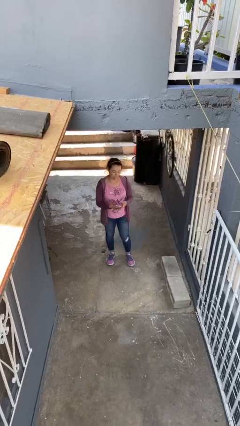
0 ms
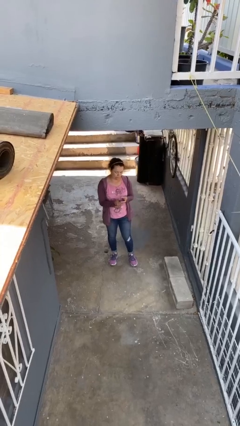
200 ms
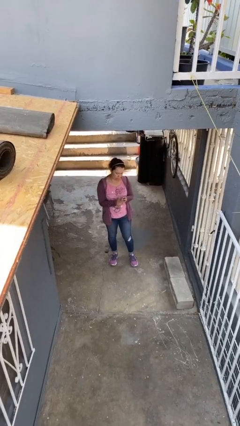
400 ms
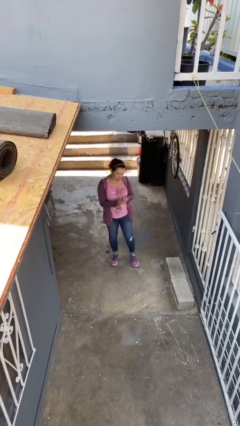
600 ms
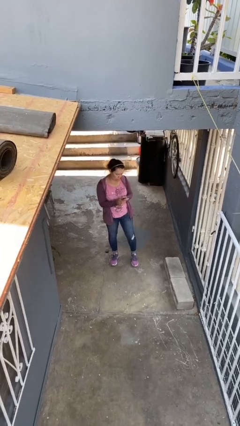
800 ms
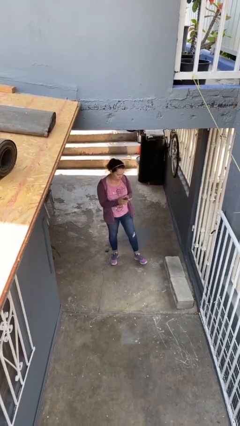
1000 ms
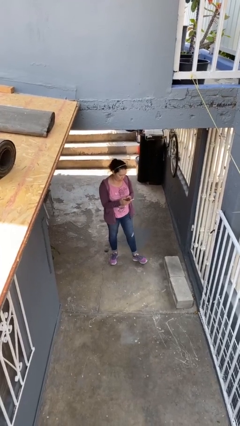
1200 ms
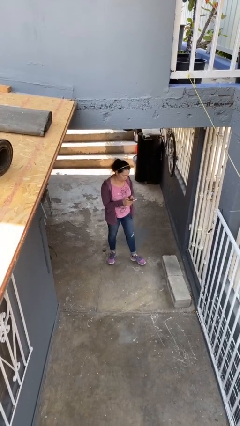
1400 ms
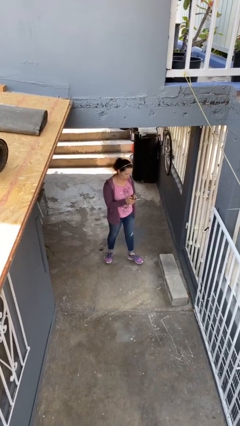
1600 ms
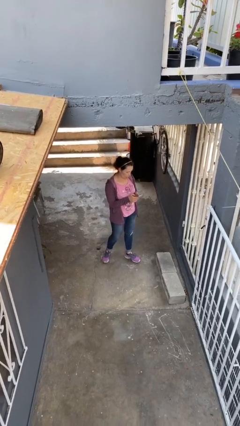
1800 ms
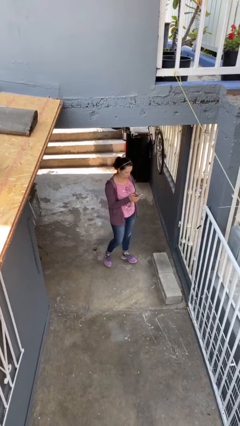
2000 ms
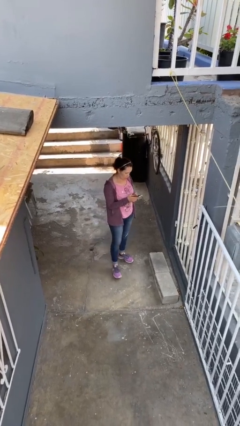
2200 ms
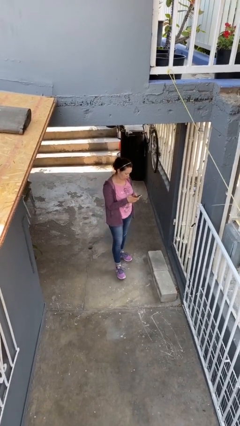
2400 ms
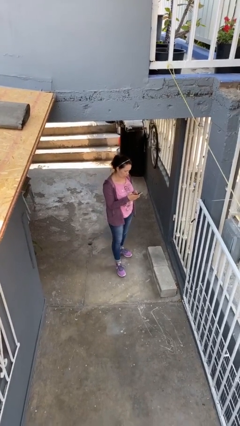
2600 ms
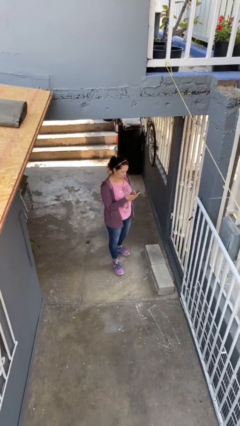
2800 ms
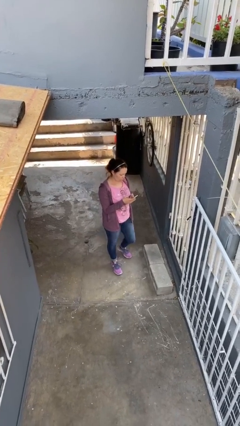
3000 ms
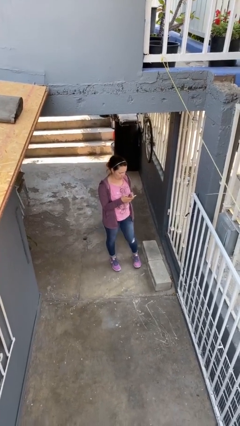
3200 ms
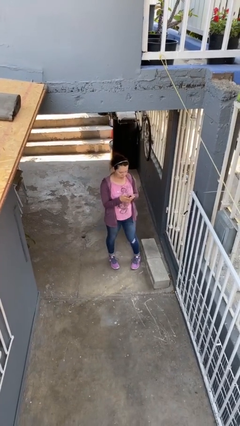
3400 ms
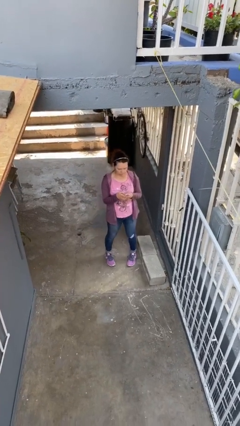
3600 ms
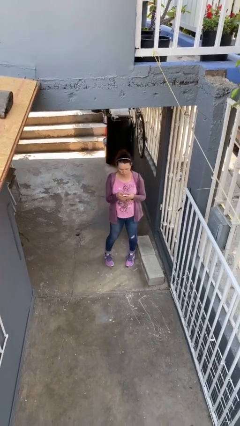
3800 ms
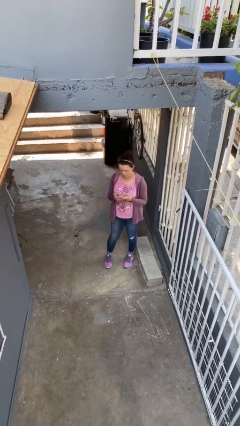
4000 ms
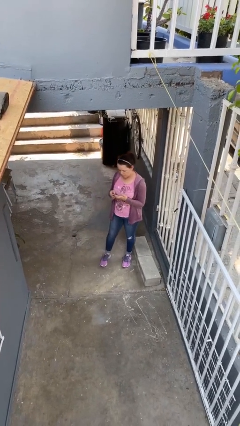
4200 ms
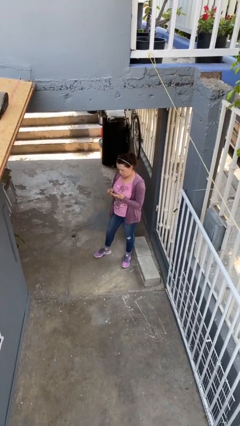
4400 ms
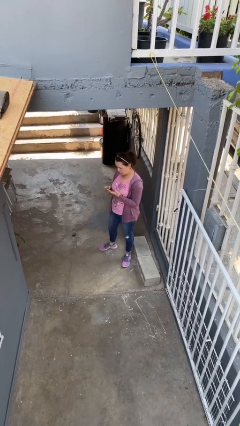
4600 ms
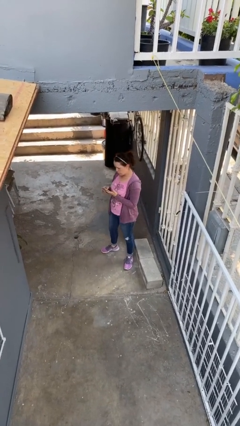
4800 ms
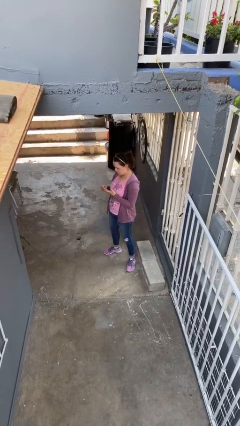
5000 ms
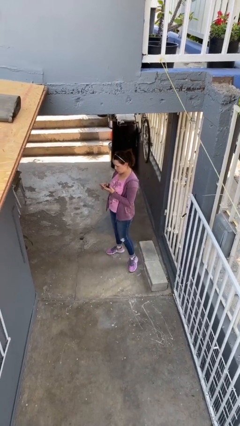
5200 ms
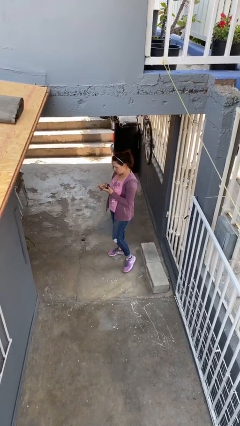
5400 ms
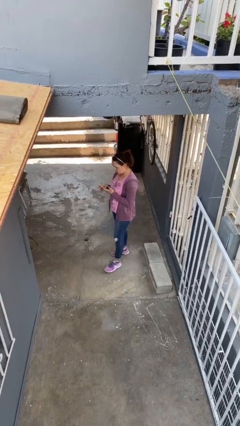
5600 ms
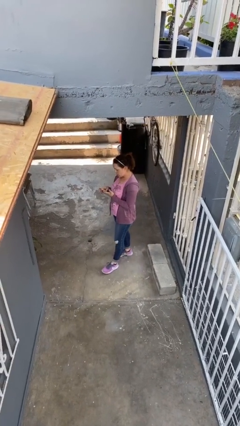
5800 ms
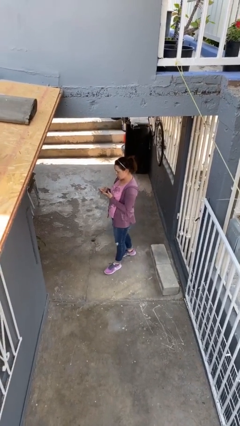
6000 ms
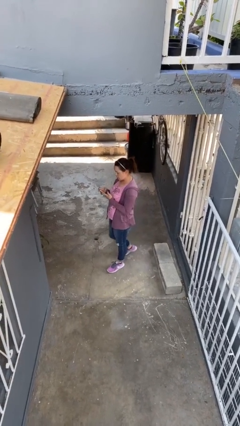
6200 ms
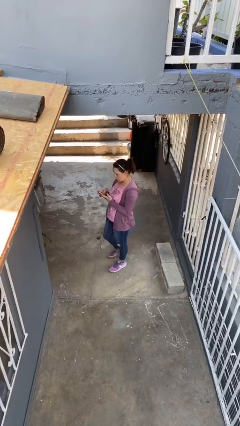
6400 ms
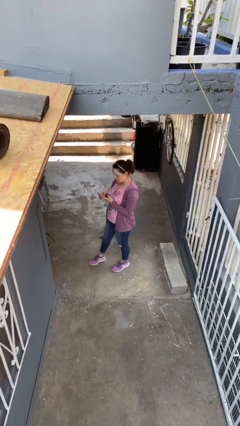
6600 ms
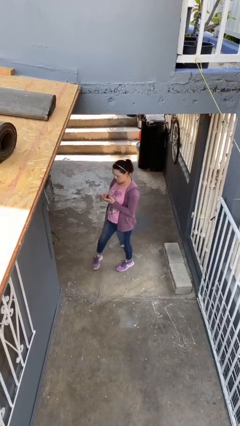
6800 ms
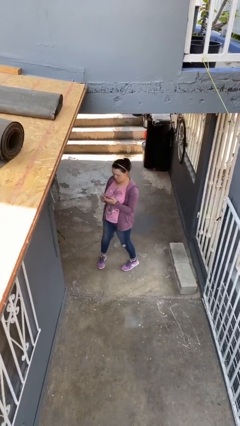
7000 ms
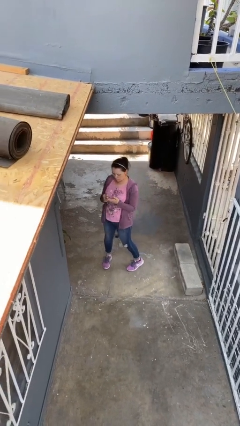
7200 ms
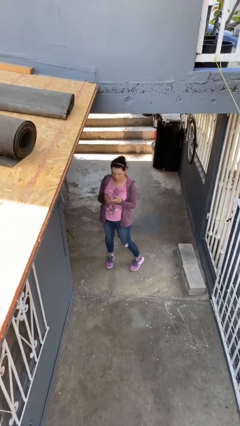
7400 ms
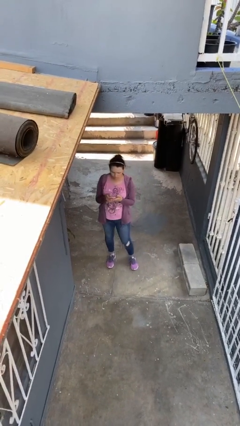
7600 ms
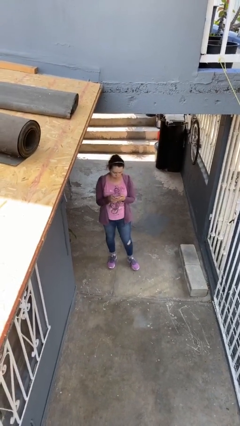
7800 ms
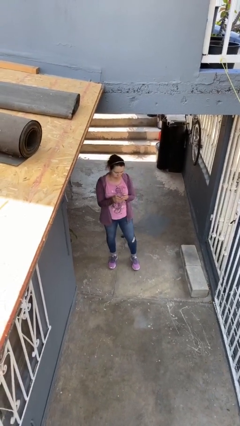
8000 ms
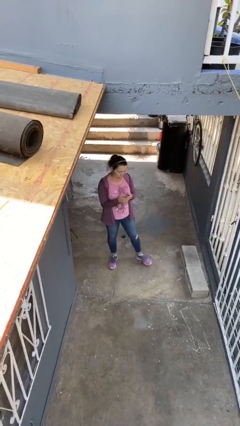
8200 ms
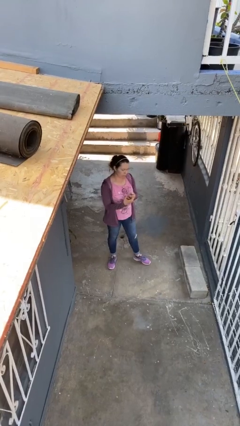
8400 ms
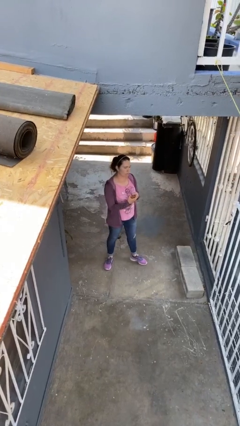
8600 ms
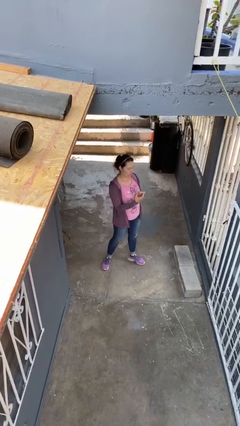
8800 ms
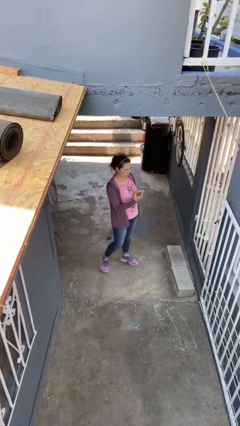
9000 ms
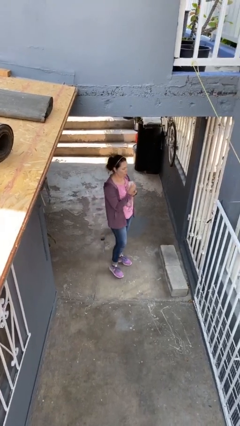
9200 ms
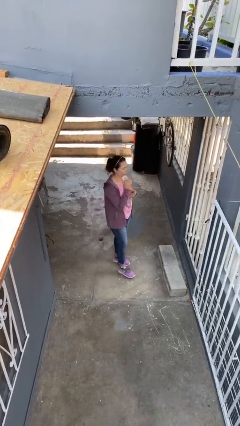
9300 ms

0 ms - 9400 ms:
person texts on phone

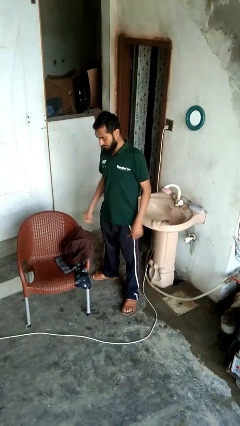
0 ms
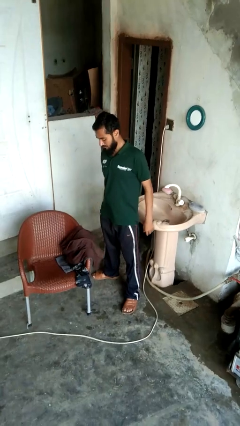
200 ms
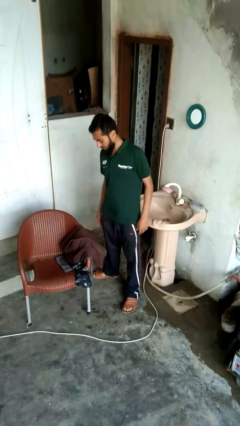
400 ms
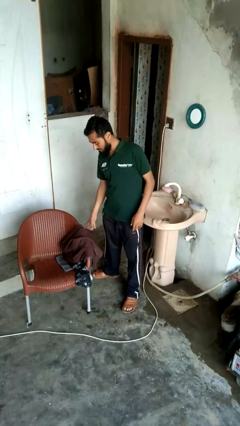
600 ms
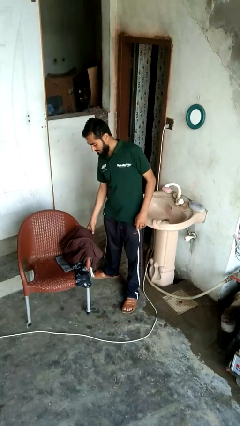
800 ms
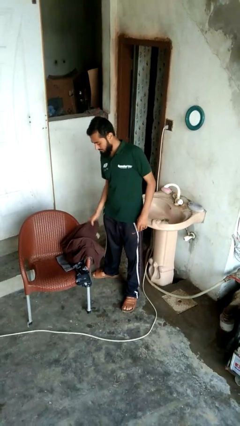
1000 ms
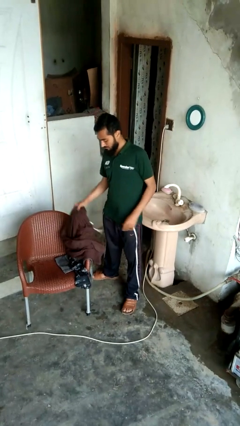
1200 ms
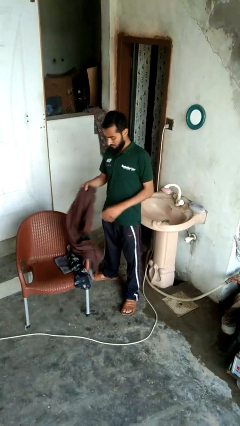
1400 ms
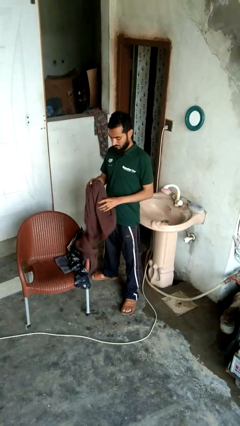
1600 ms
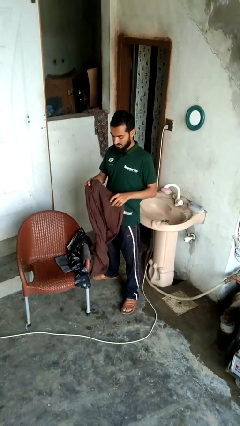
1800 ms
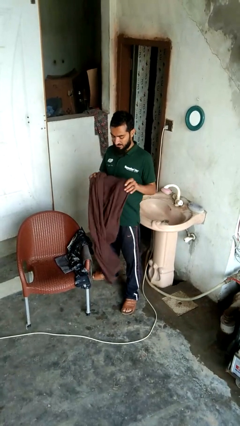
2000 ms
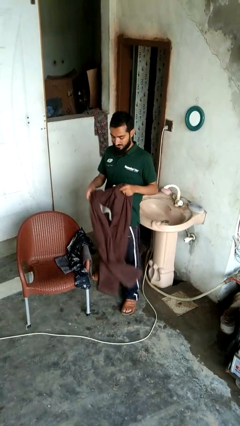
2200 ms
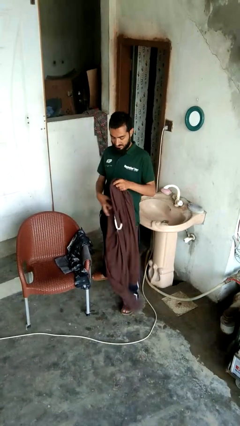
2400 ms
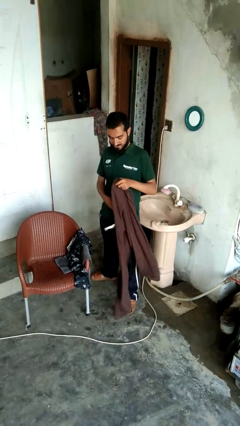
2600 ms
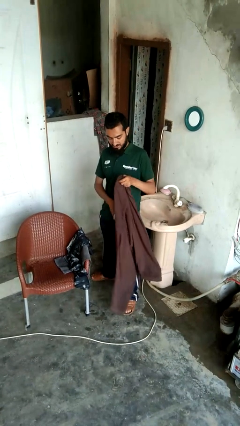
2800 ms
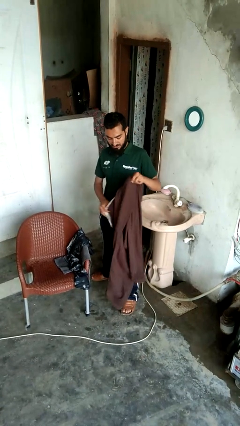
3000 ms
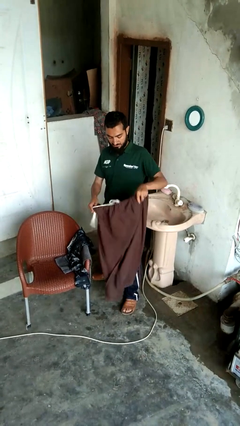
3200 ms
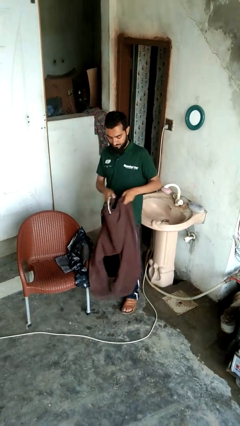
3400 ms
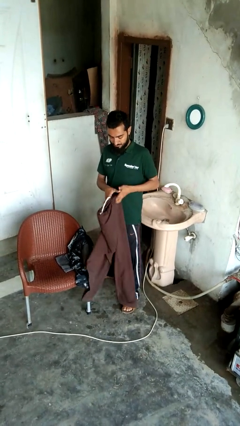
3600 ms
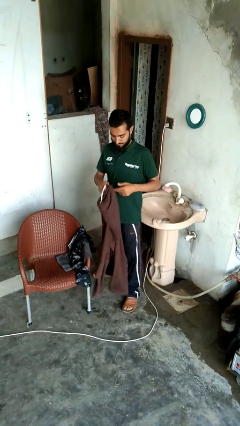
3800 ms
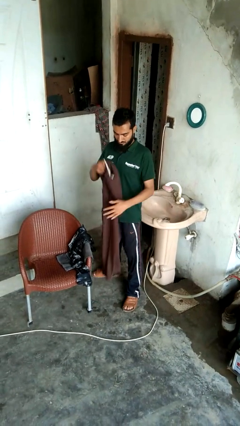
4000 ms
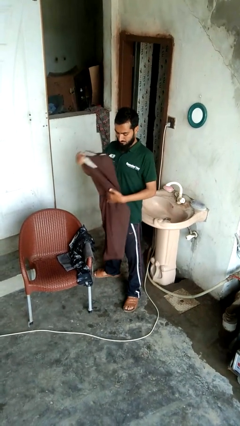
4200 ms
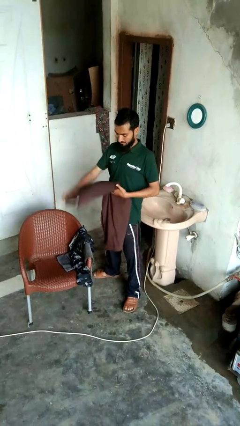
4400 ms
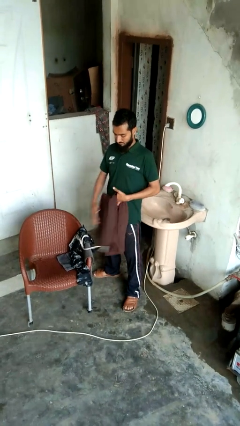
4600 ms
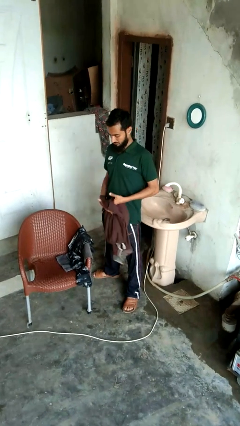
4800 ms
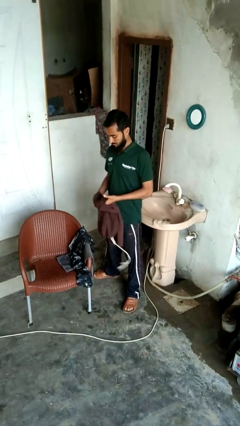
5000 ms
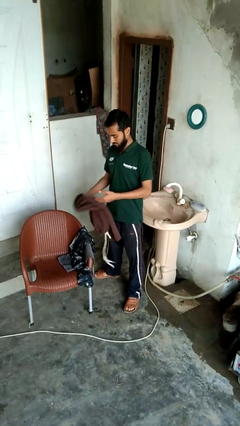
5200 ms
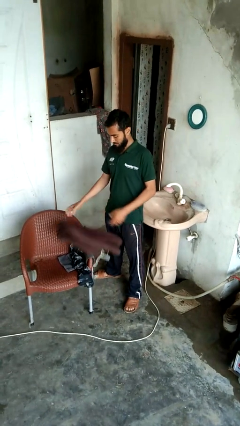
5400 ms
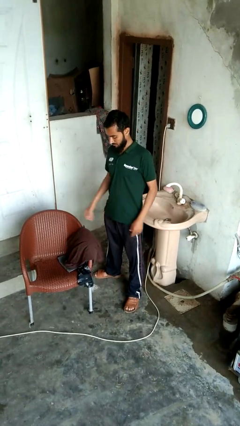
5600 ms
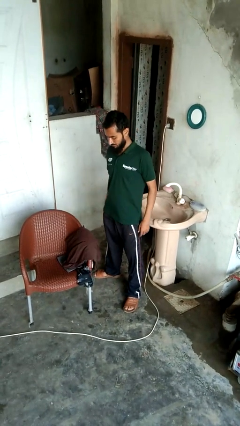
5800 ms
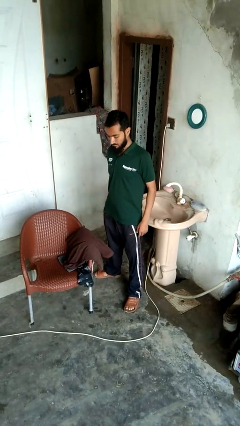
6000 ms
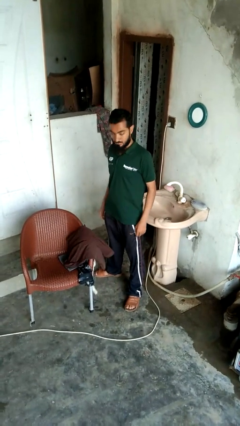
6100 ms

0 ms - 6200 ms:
person folds pants

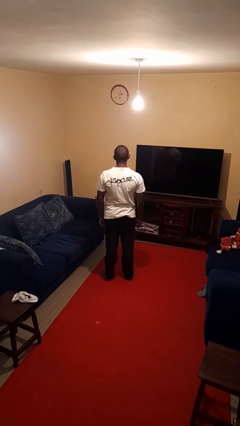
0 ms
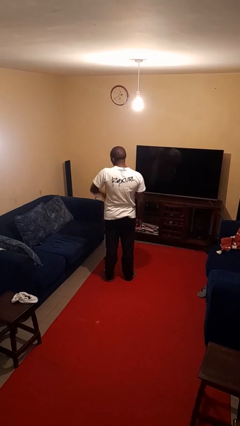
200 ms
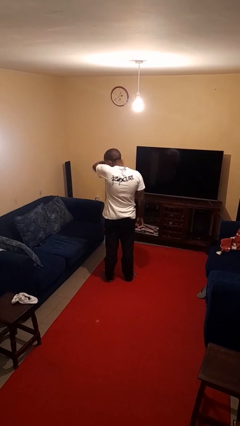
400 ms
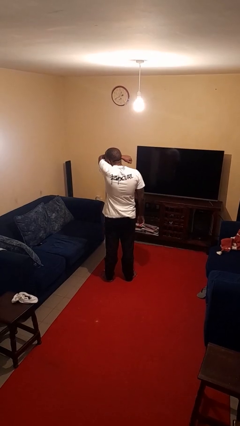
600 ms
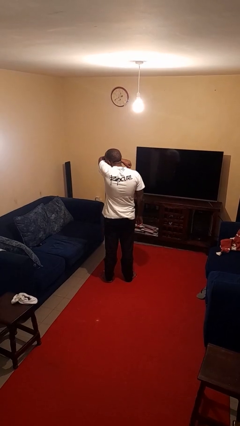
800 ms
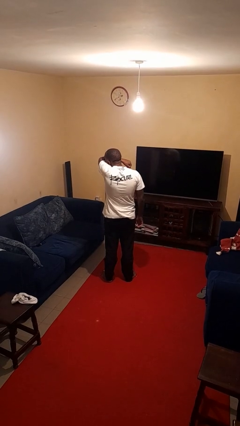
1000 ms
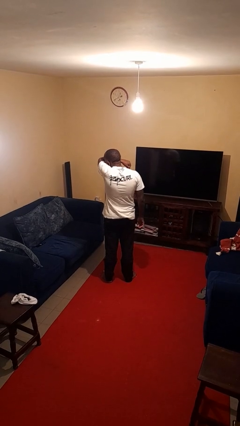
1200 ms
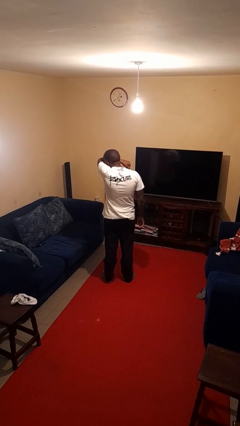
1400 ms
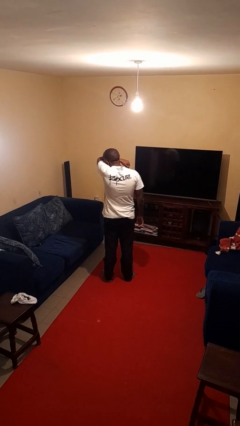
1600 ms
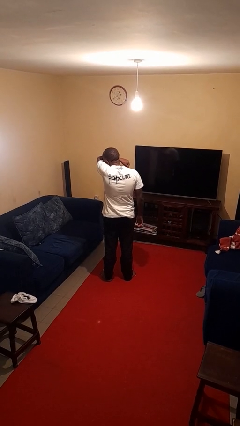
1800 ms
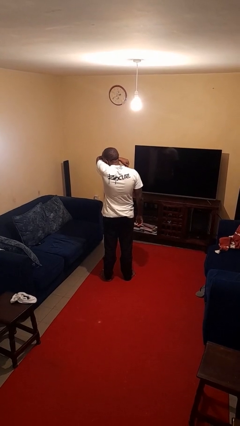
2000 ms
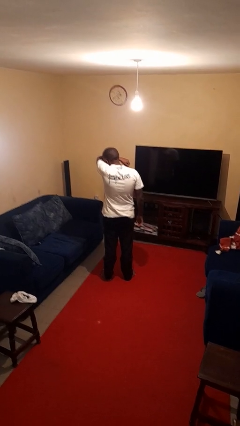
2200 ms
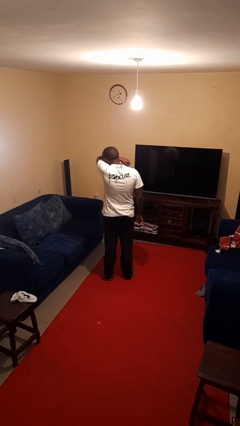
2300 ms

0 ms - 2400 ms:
person sneezes into arm
